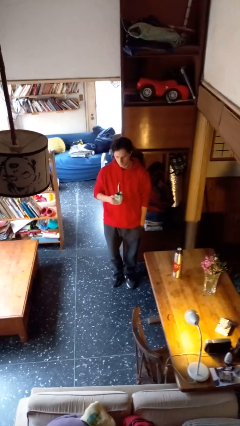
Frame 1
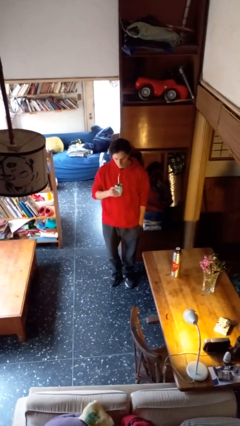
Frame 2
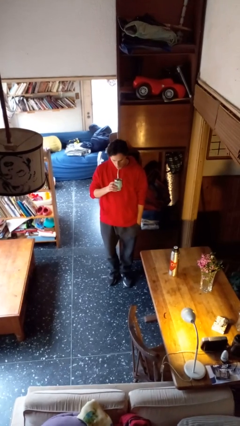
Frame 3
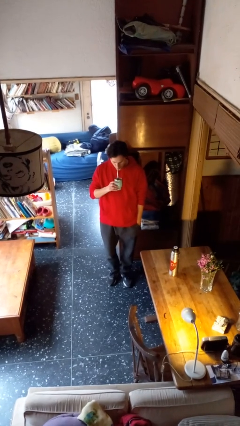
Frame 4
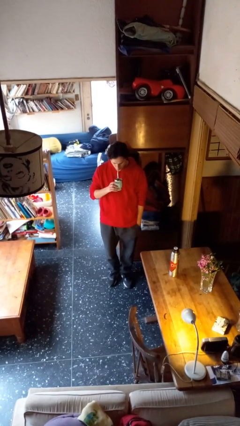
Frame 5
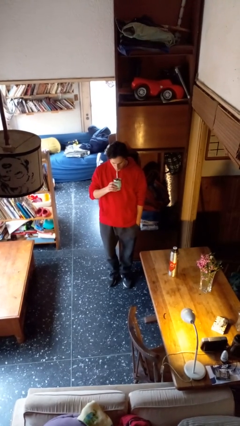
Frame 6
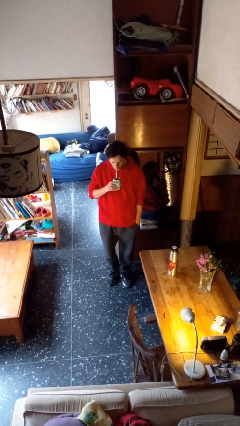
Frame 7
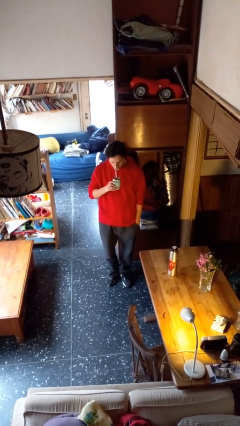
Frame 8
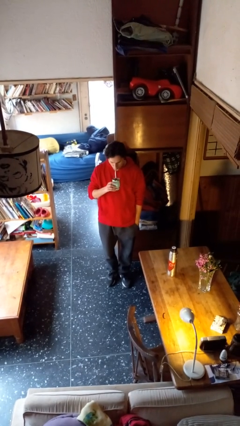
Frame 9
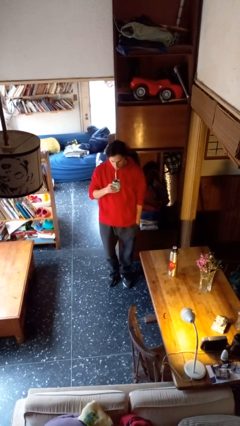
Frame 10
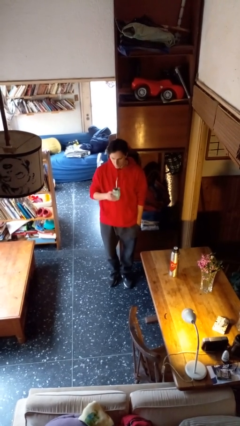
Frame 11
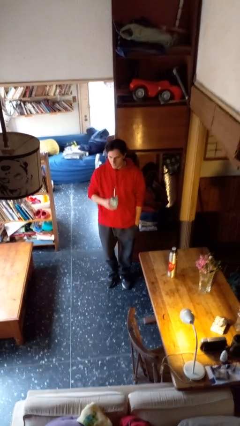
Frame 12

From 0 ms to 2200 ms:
person drinks from straw

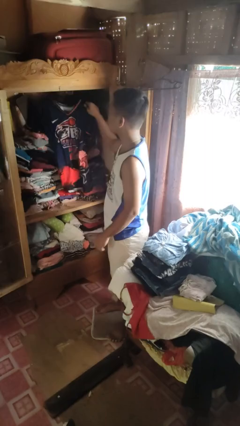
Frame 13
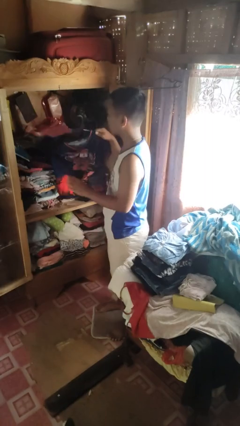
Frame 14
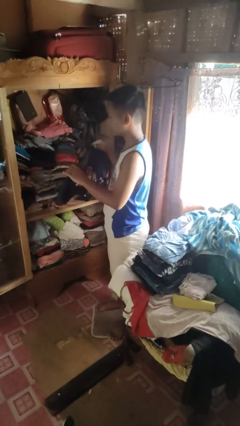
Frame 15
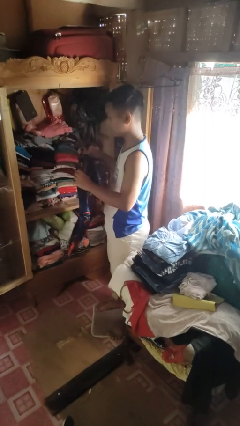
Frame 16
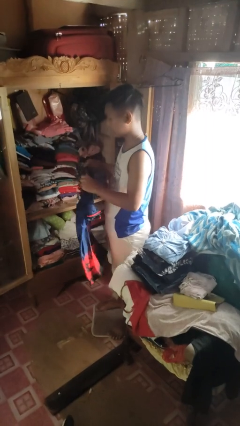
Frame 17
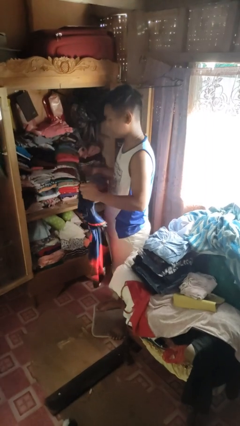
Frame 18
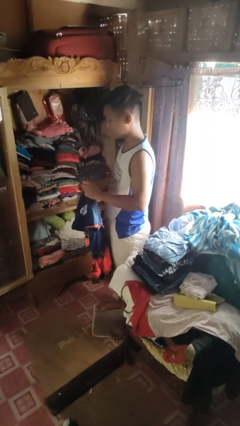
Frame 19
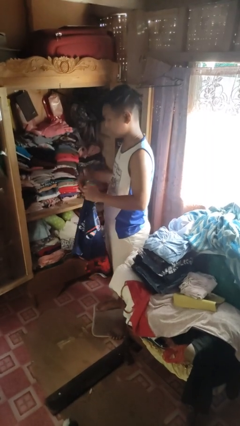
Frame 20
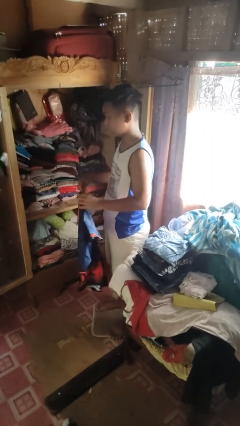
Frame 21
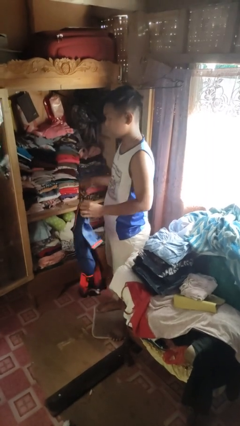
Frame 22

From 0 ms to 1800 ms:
person takes clothes from closet

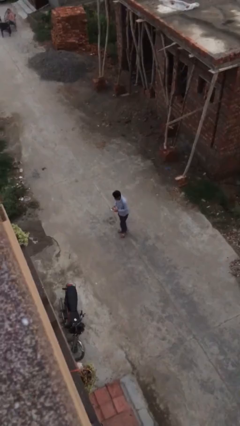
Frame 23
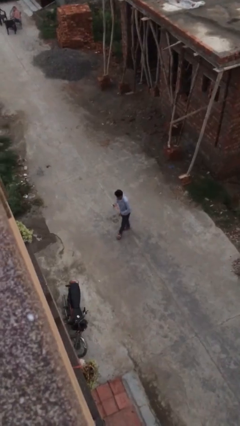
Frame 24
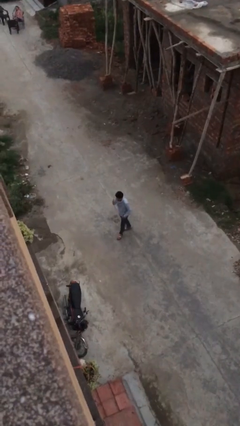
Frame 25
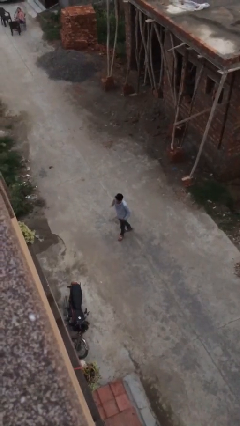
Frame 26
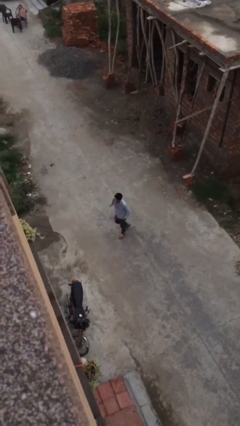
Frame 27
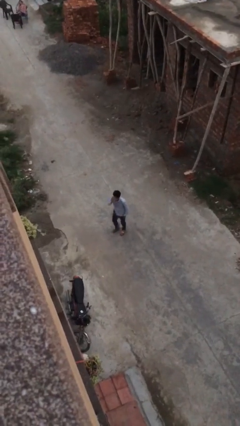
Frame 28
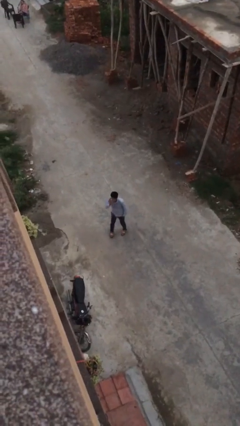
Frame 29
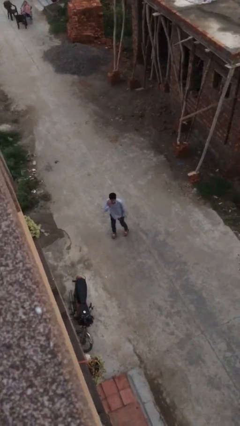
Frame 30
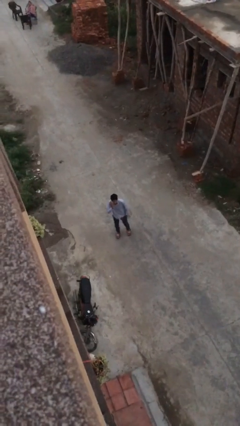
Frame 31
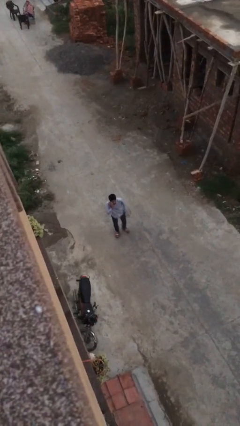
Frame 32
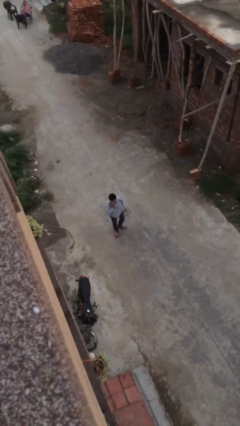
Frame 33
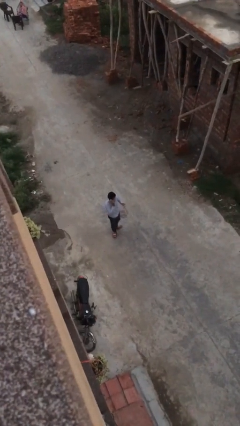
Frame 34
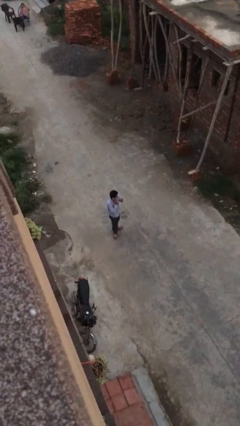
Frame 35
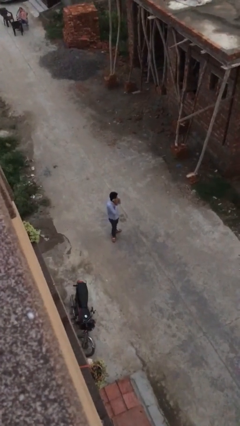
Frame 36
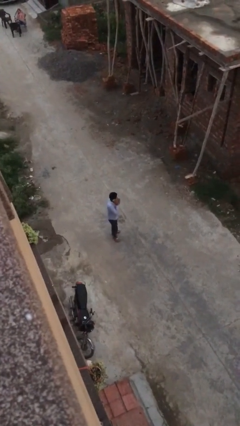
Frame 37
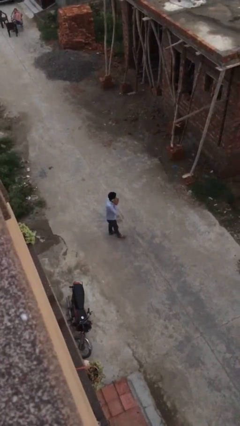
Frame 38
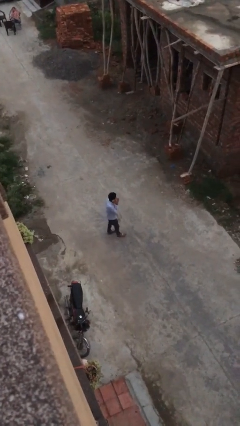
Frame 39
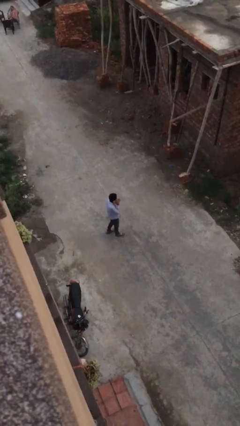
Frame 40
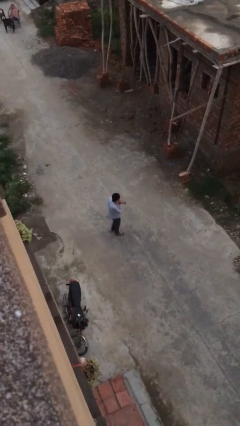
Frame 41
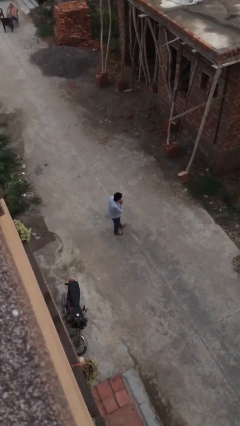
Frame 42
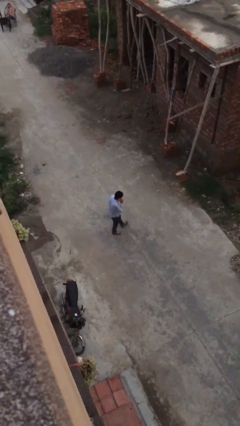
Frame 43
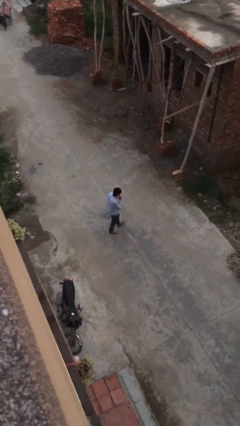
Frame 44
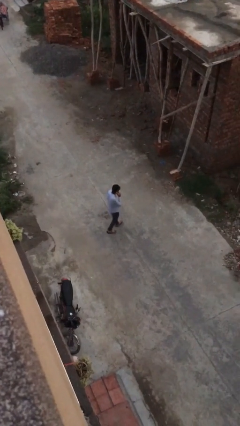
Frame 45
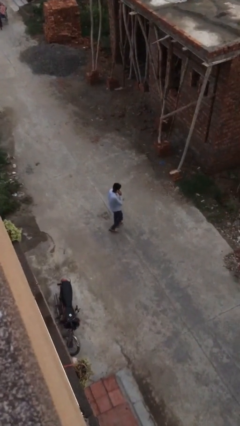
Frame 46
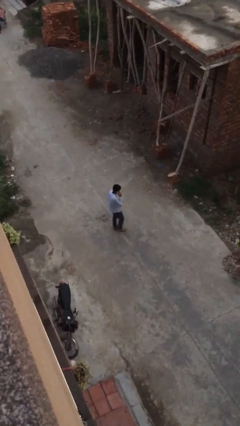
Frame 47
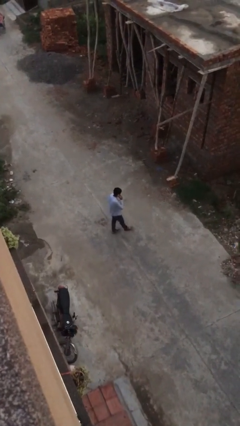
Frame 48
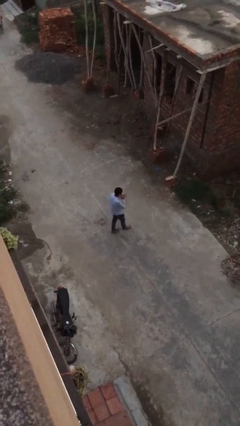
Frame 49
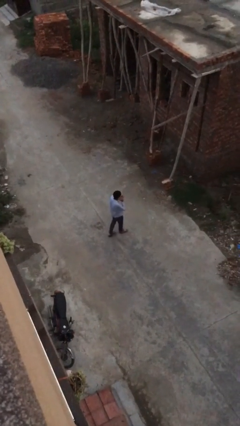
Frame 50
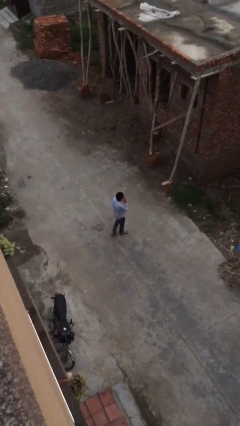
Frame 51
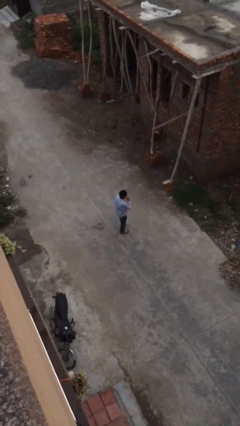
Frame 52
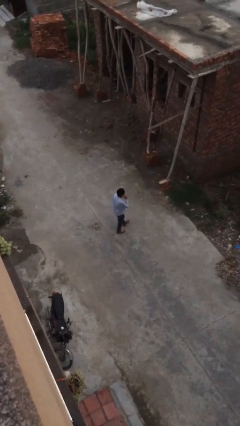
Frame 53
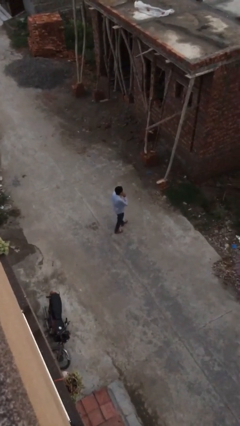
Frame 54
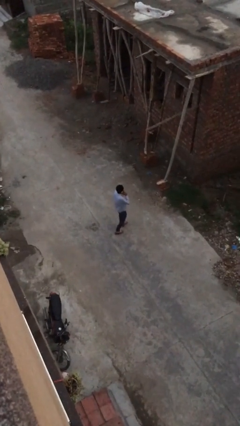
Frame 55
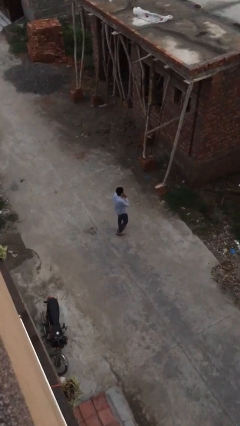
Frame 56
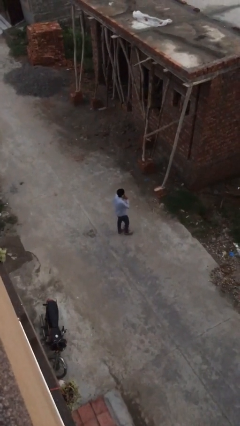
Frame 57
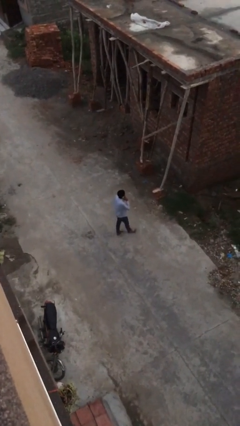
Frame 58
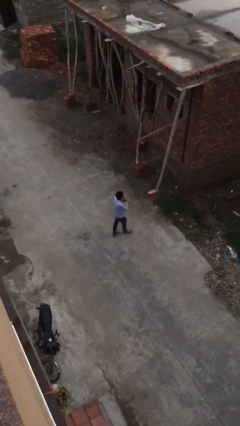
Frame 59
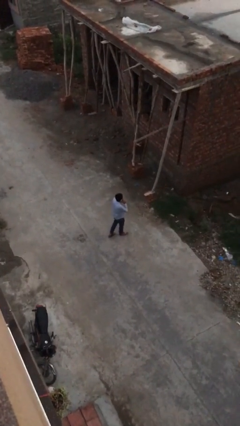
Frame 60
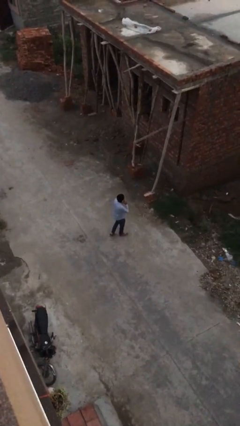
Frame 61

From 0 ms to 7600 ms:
person talks on phone

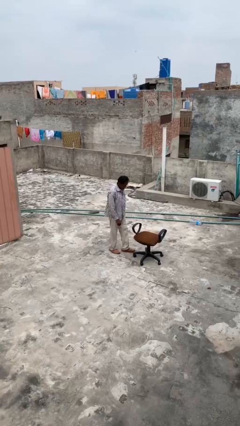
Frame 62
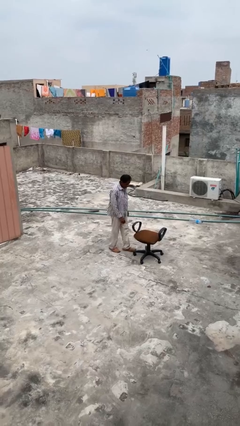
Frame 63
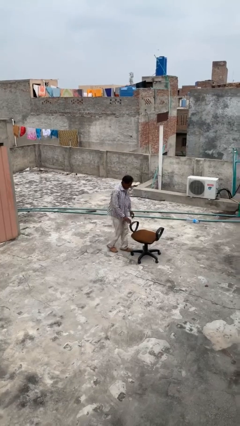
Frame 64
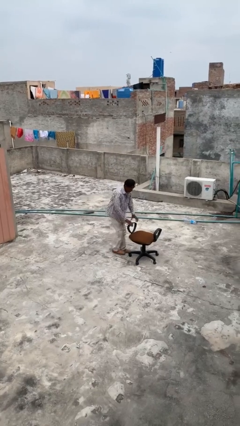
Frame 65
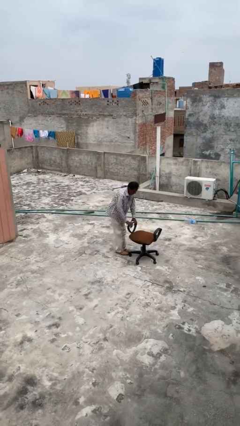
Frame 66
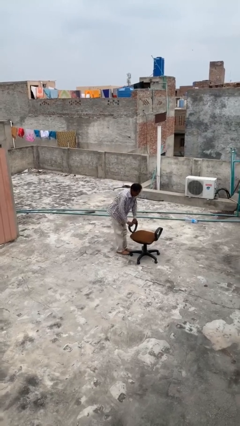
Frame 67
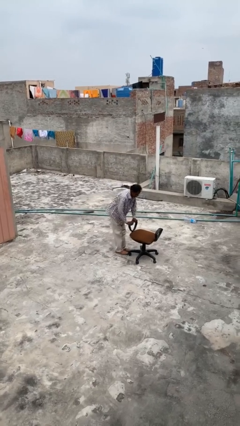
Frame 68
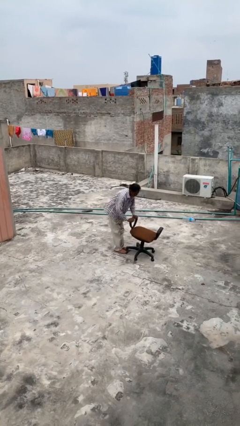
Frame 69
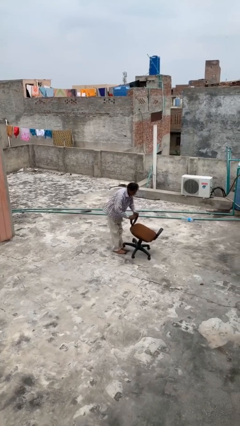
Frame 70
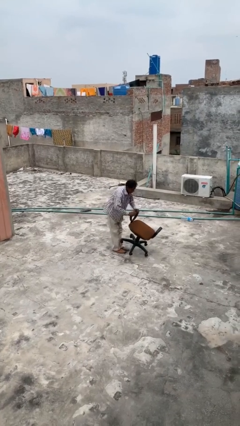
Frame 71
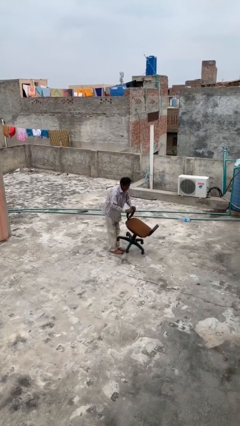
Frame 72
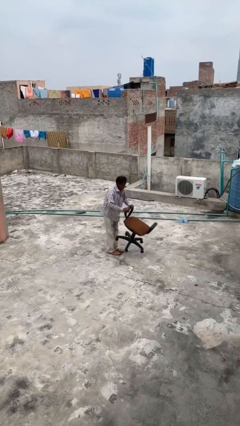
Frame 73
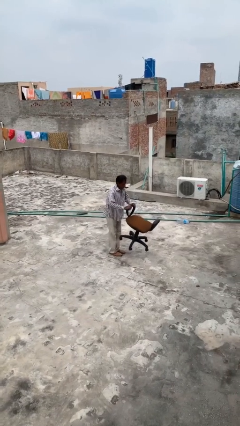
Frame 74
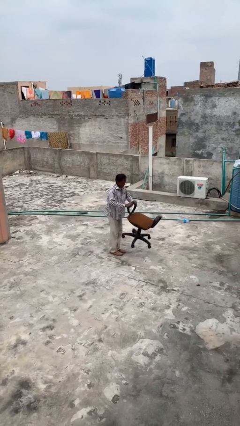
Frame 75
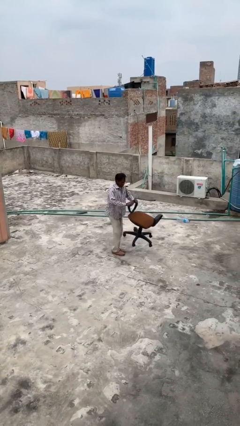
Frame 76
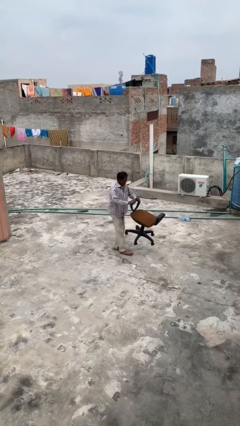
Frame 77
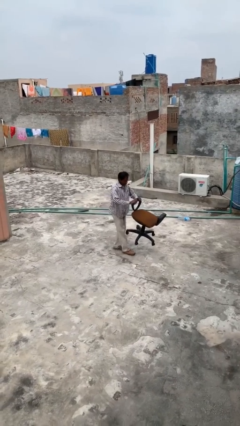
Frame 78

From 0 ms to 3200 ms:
person picks up object from floor

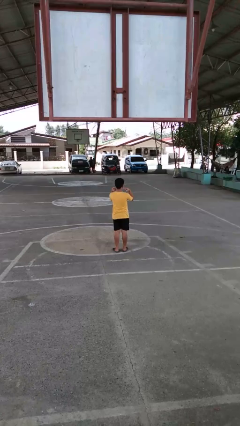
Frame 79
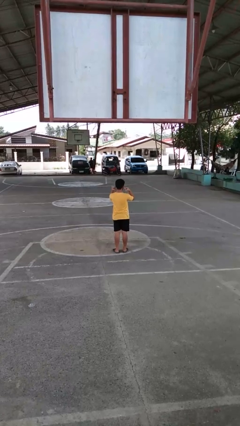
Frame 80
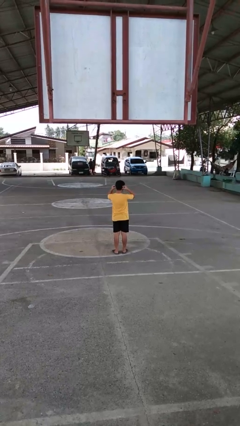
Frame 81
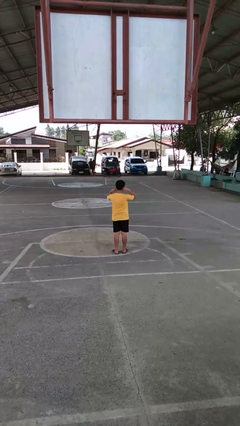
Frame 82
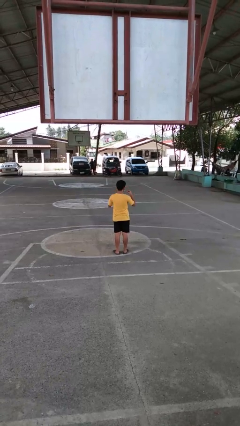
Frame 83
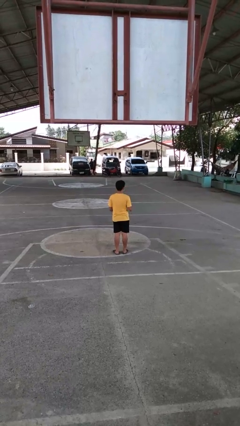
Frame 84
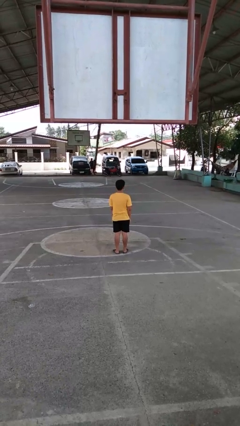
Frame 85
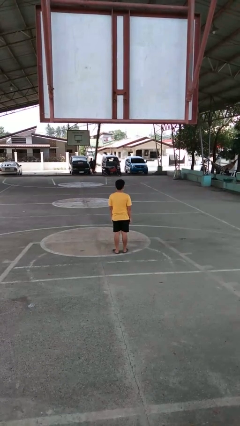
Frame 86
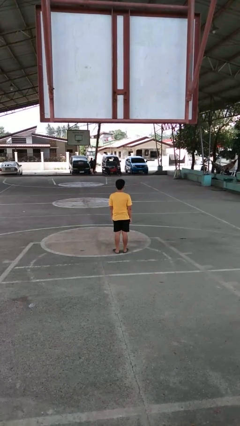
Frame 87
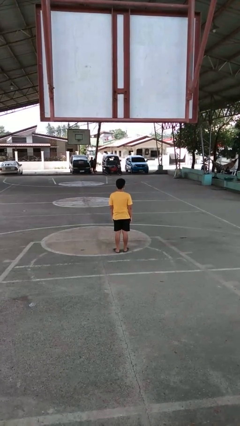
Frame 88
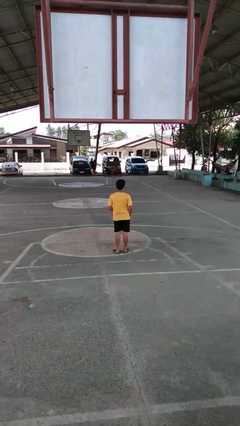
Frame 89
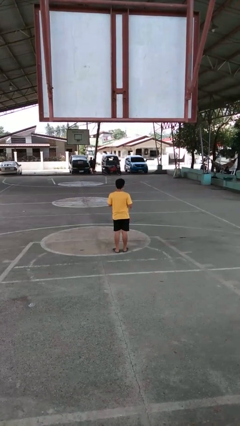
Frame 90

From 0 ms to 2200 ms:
person puts on facemask

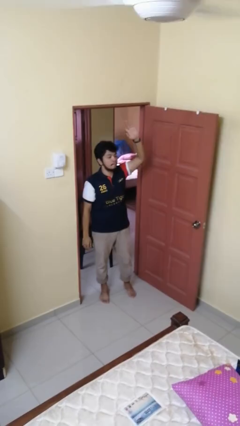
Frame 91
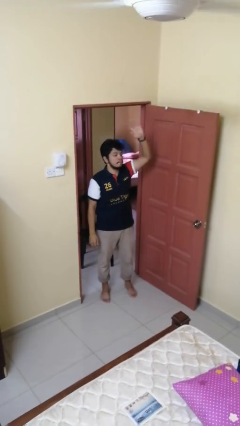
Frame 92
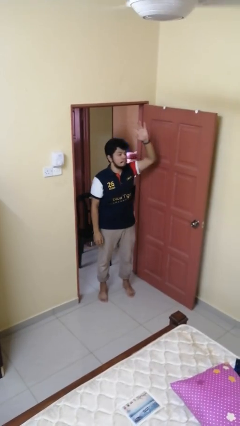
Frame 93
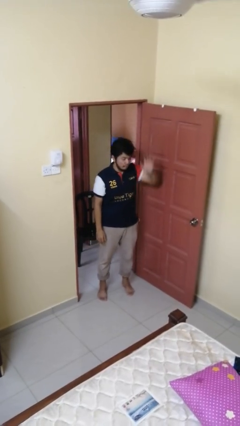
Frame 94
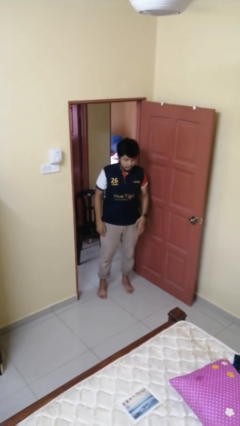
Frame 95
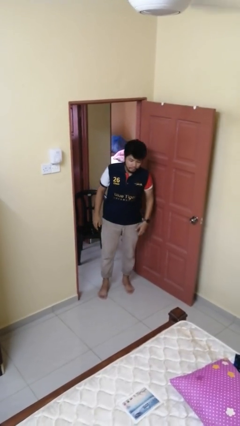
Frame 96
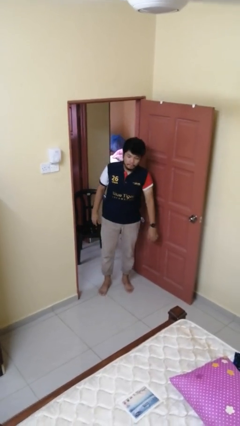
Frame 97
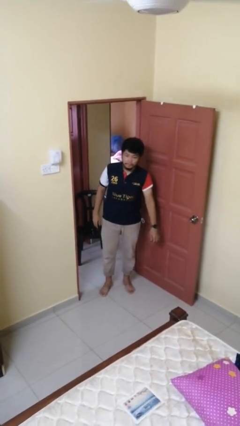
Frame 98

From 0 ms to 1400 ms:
person gestures lower hand
